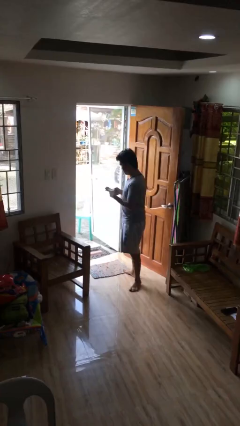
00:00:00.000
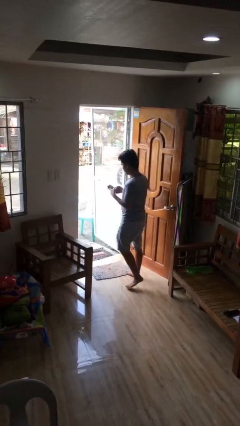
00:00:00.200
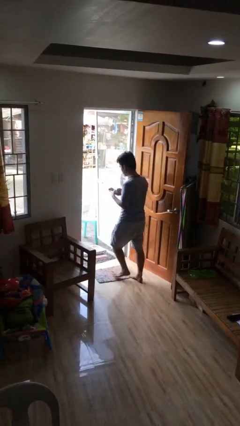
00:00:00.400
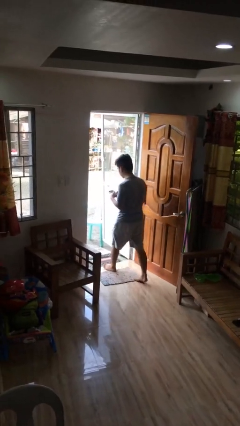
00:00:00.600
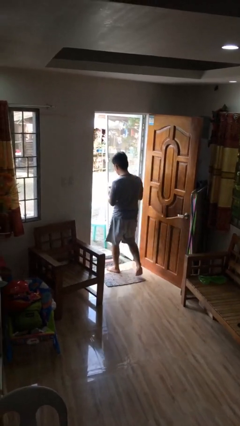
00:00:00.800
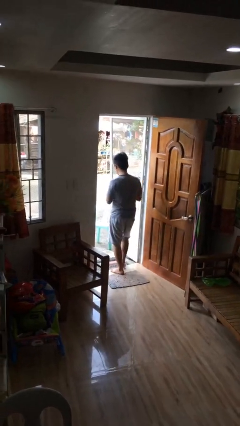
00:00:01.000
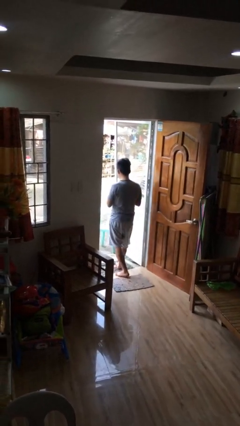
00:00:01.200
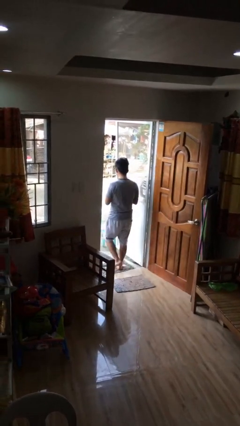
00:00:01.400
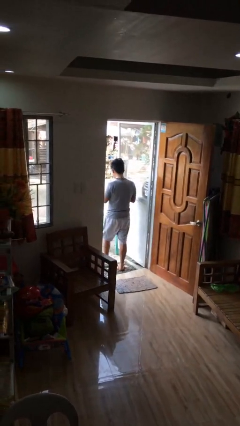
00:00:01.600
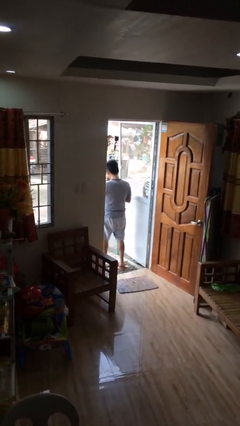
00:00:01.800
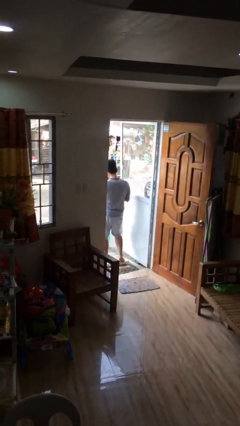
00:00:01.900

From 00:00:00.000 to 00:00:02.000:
person exits scene through structure

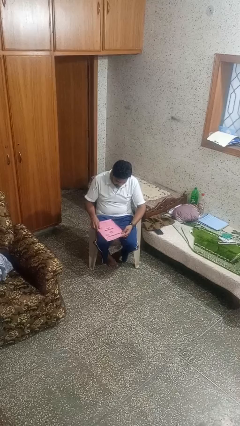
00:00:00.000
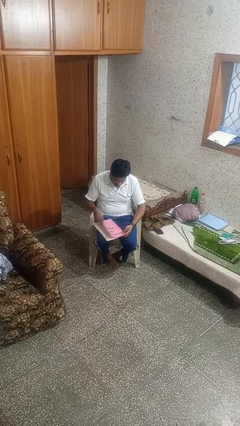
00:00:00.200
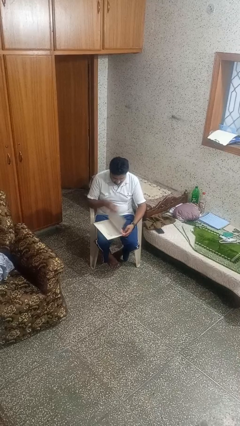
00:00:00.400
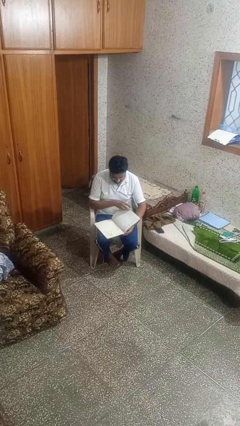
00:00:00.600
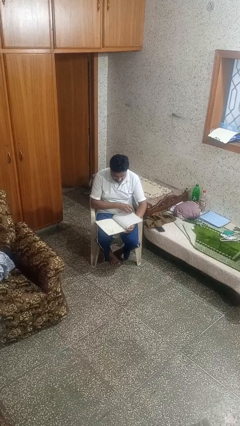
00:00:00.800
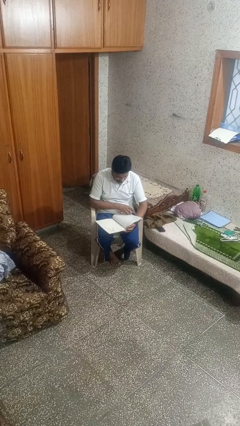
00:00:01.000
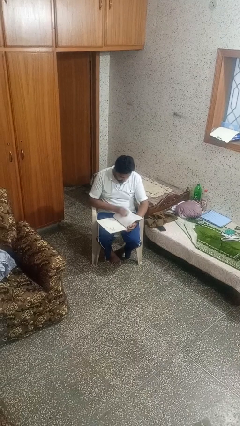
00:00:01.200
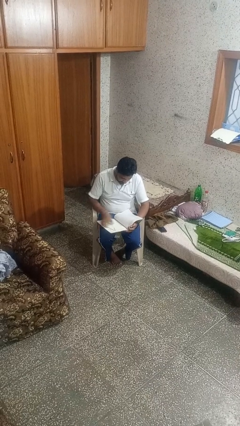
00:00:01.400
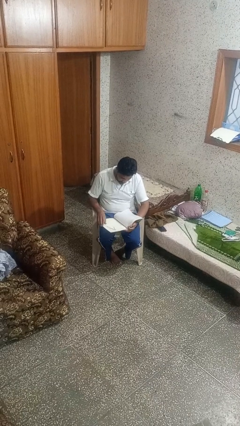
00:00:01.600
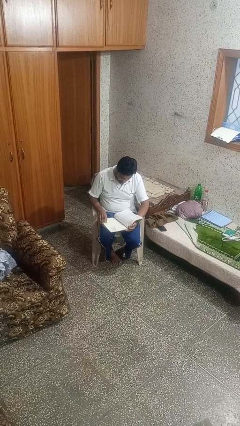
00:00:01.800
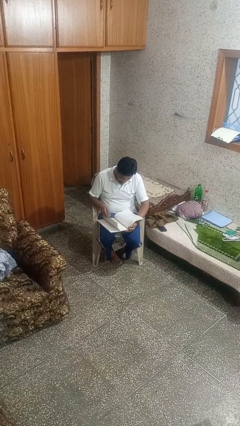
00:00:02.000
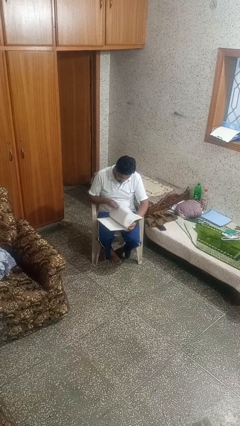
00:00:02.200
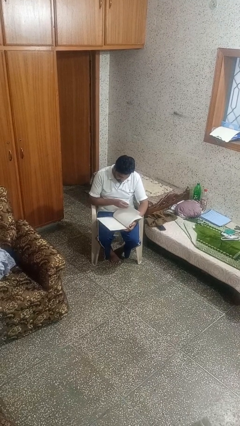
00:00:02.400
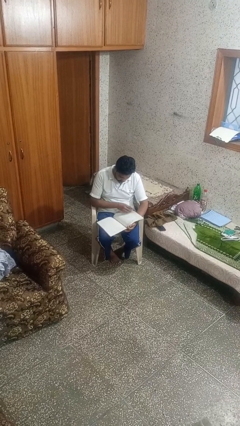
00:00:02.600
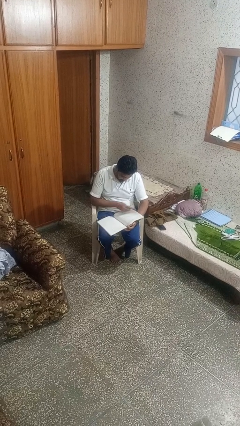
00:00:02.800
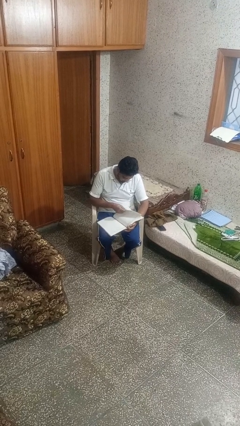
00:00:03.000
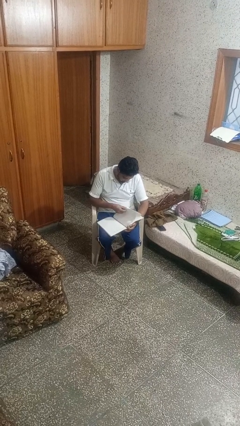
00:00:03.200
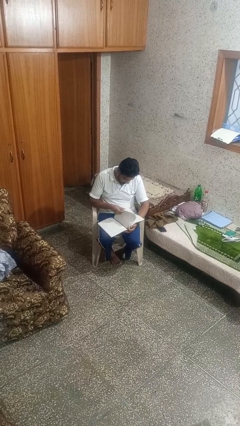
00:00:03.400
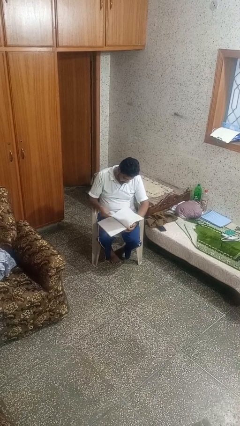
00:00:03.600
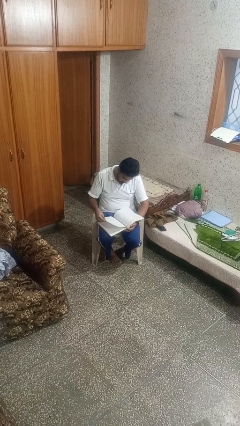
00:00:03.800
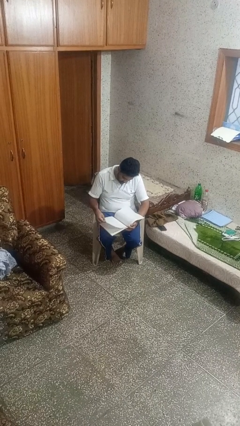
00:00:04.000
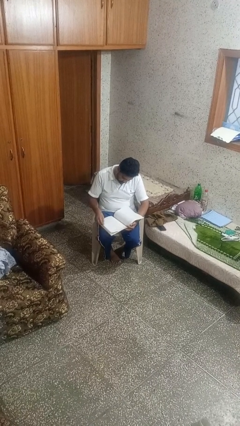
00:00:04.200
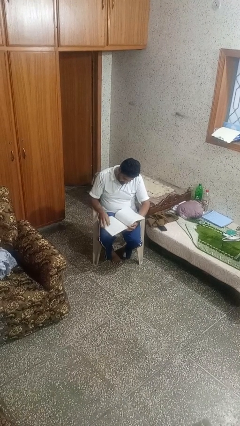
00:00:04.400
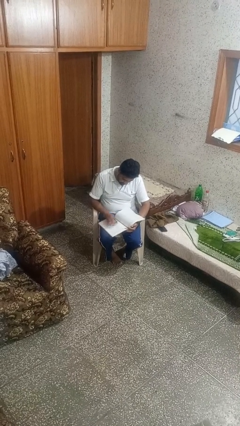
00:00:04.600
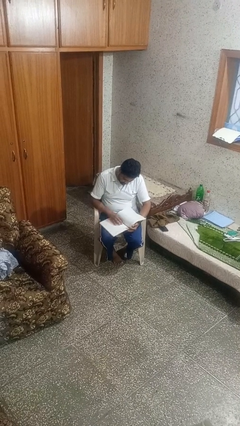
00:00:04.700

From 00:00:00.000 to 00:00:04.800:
person reads book

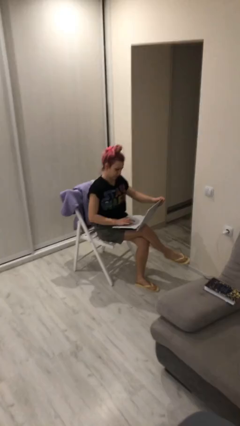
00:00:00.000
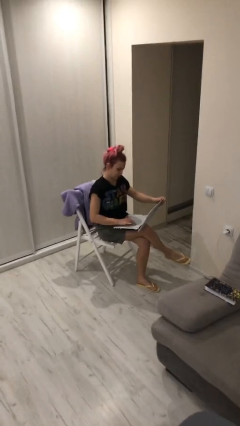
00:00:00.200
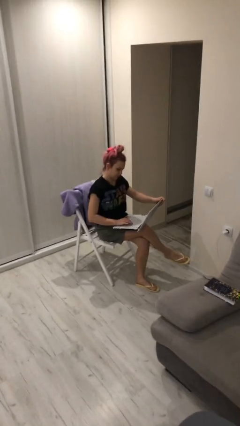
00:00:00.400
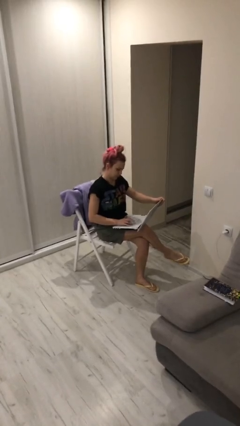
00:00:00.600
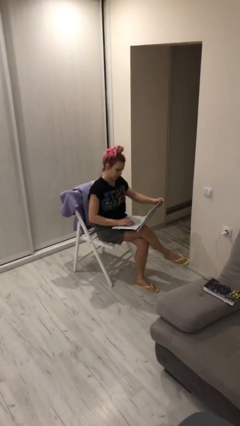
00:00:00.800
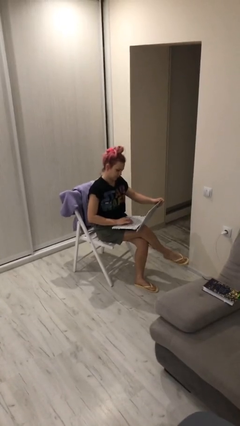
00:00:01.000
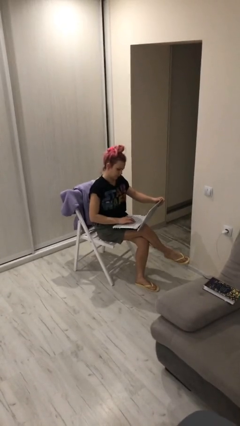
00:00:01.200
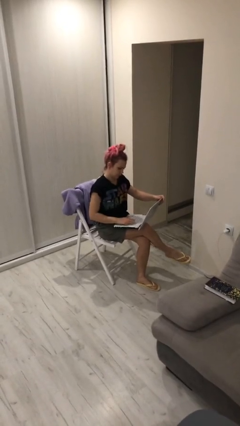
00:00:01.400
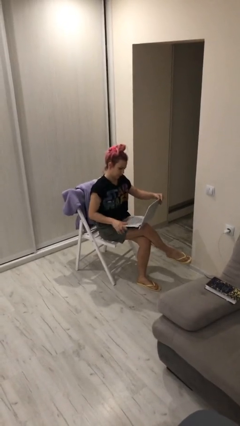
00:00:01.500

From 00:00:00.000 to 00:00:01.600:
person interacts with laptop

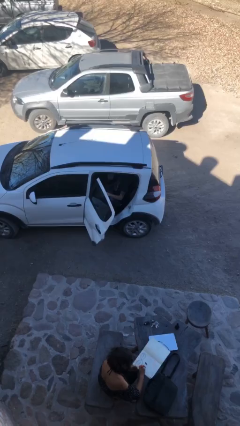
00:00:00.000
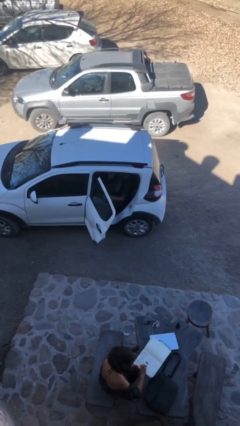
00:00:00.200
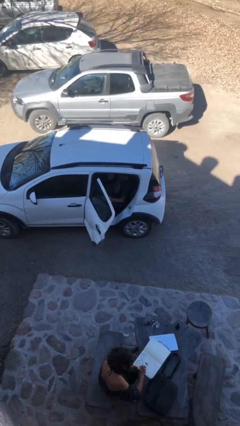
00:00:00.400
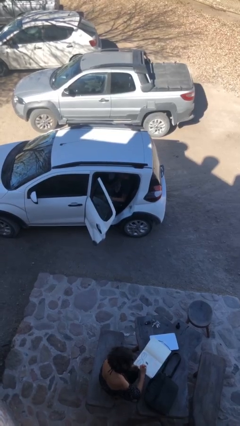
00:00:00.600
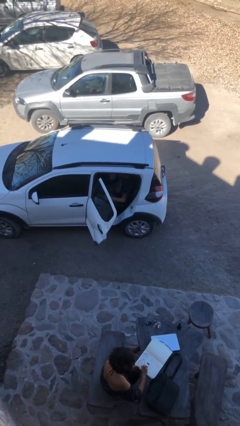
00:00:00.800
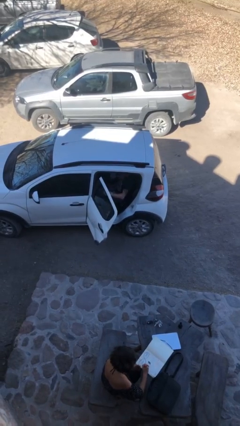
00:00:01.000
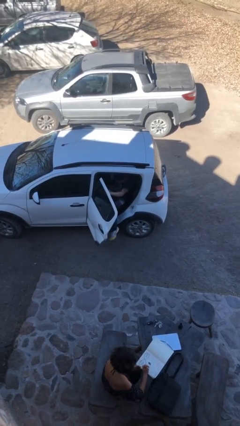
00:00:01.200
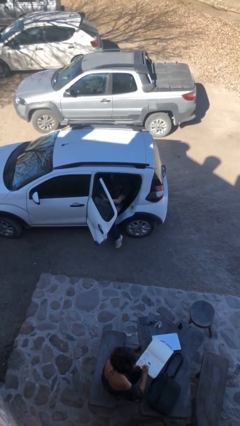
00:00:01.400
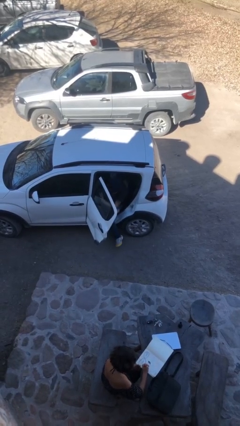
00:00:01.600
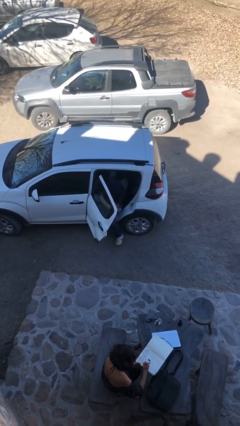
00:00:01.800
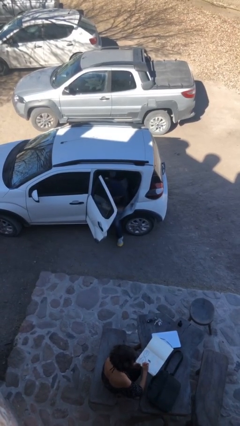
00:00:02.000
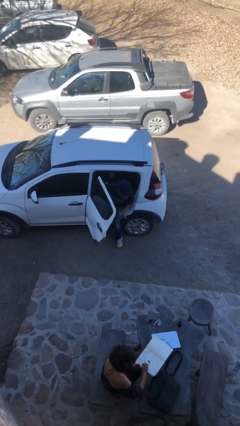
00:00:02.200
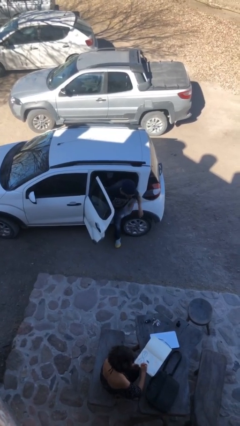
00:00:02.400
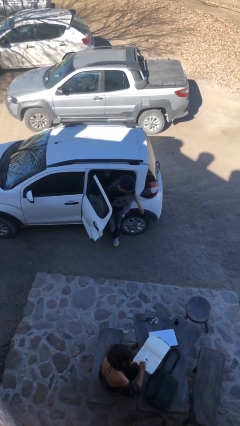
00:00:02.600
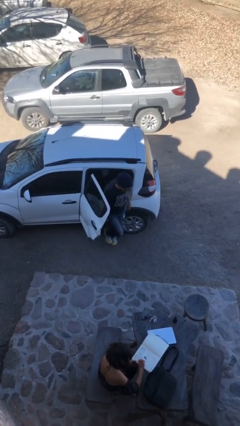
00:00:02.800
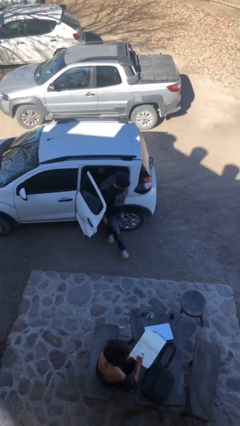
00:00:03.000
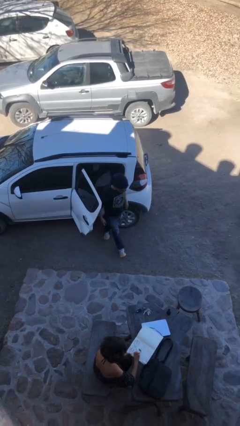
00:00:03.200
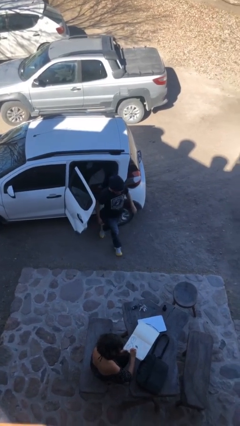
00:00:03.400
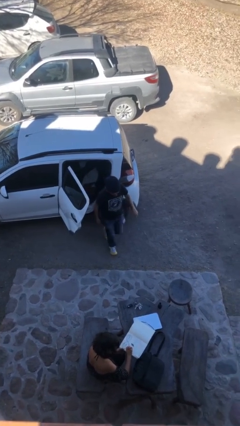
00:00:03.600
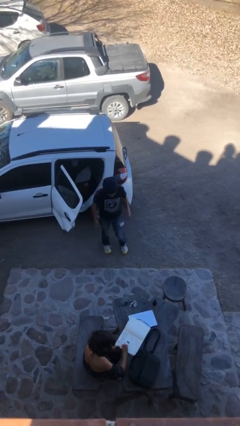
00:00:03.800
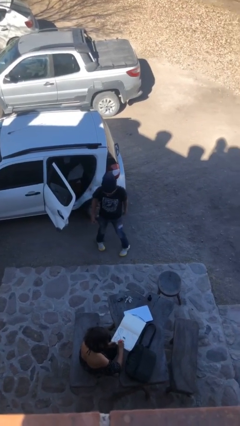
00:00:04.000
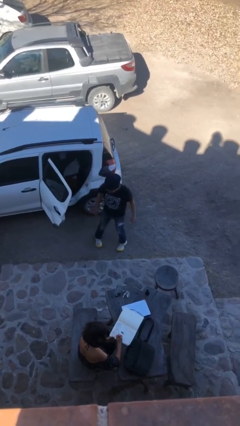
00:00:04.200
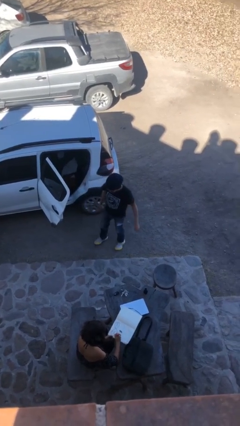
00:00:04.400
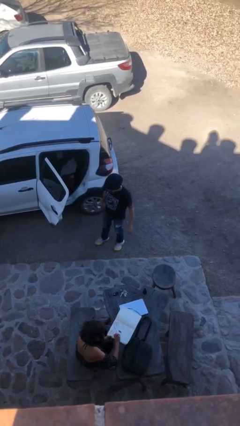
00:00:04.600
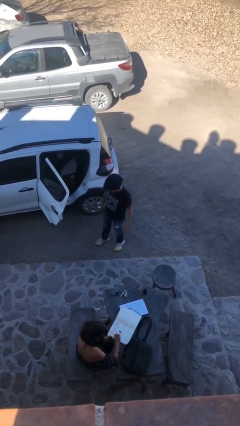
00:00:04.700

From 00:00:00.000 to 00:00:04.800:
person exits car

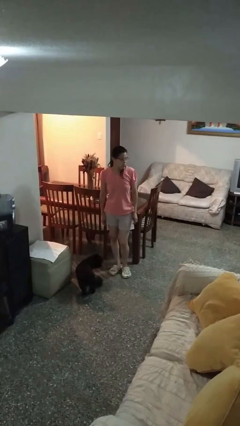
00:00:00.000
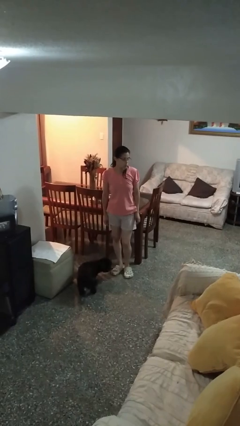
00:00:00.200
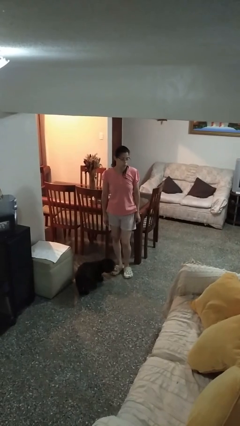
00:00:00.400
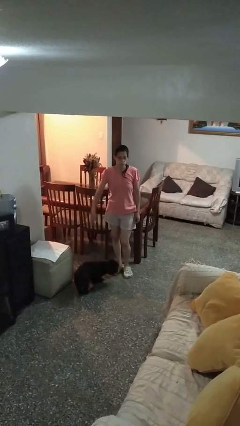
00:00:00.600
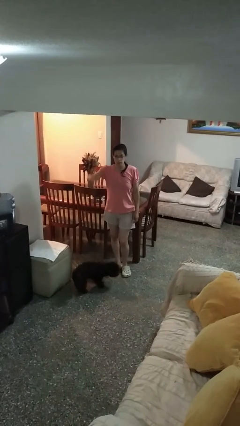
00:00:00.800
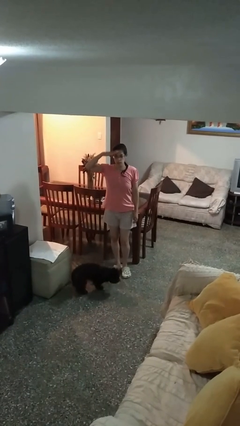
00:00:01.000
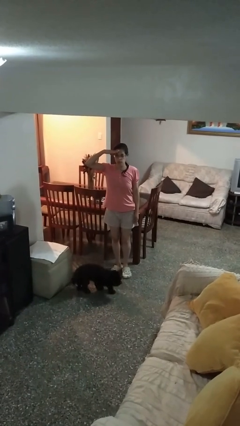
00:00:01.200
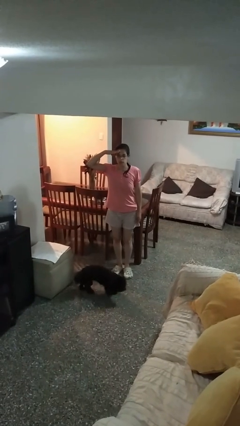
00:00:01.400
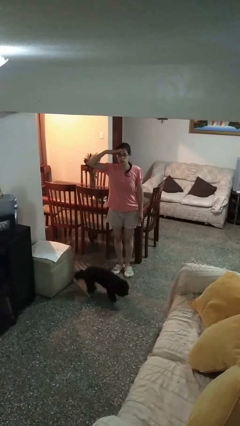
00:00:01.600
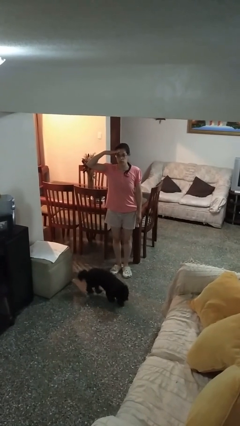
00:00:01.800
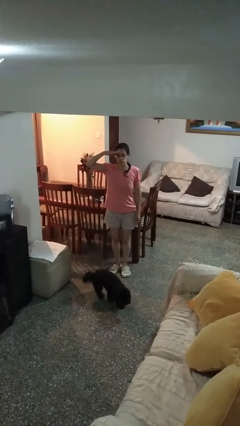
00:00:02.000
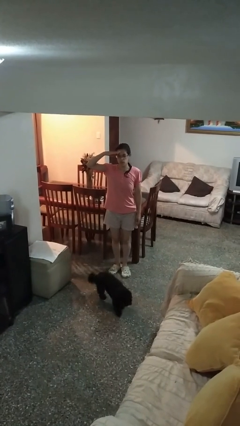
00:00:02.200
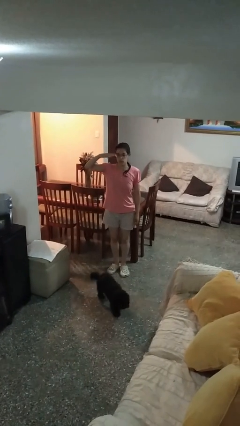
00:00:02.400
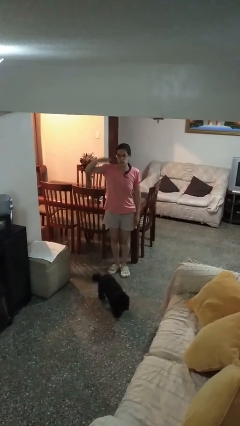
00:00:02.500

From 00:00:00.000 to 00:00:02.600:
person salutes

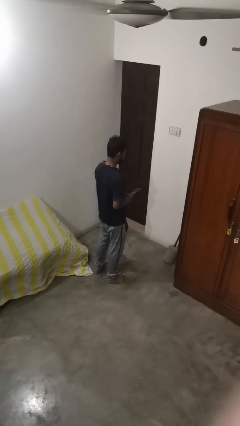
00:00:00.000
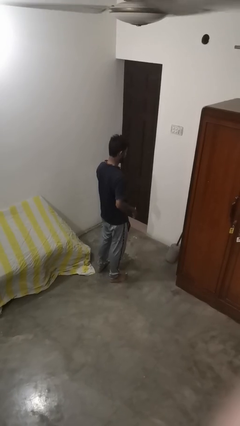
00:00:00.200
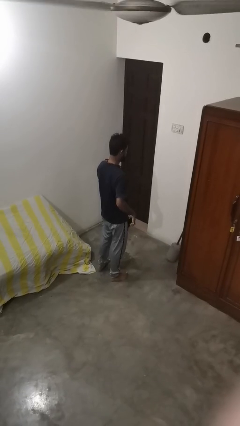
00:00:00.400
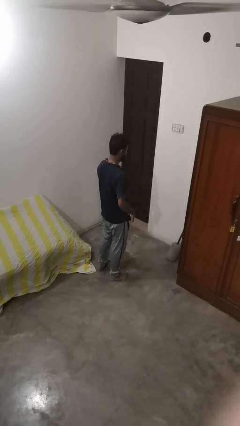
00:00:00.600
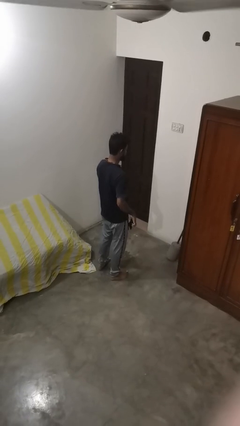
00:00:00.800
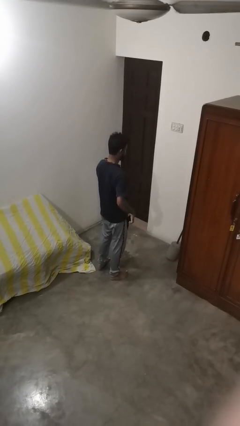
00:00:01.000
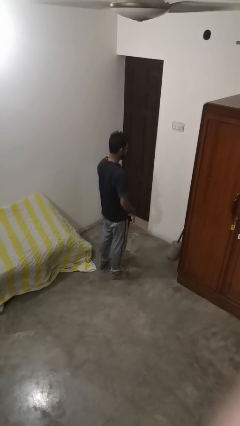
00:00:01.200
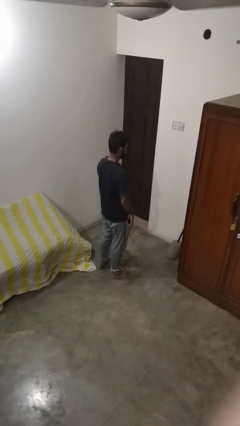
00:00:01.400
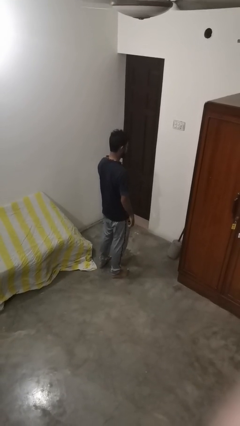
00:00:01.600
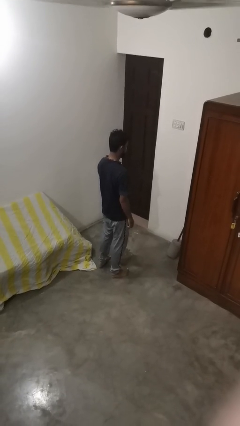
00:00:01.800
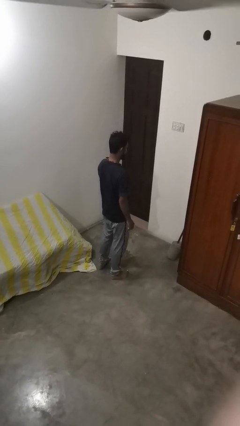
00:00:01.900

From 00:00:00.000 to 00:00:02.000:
person puts phone into pocket
